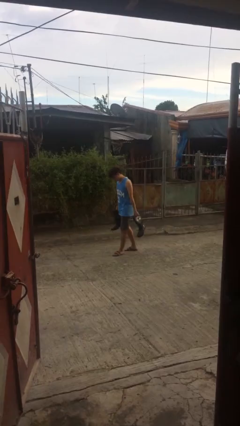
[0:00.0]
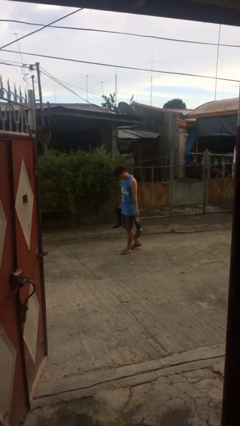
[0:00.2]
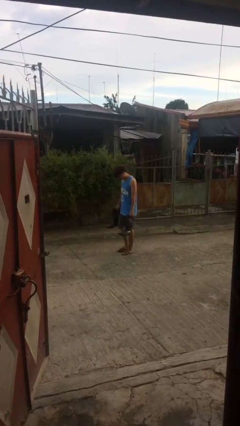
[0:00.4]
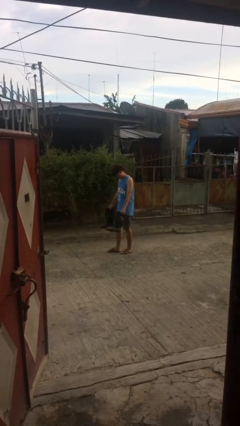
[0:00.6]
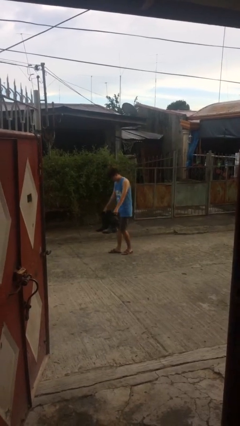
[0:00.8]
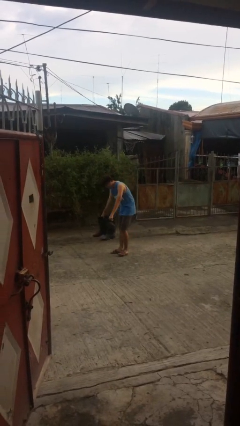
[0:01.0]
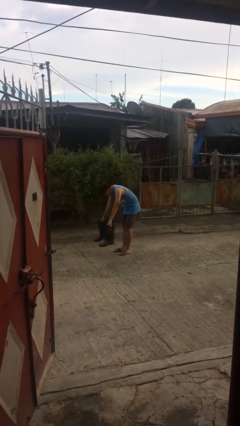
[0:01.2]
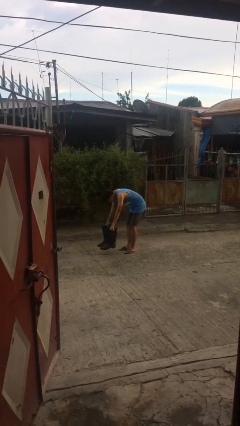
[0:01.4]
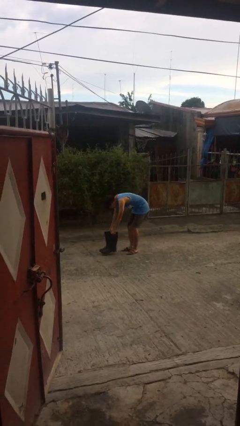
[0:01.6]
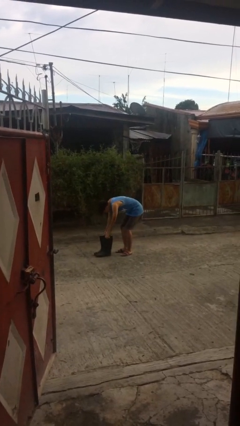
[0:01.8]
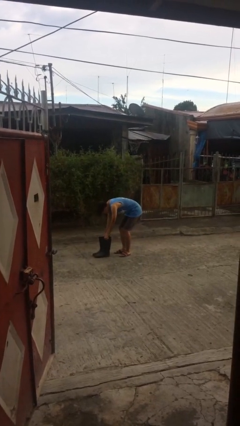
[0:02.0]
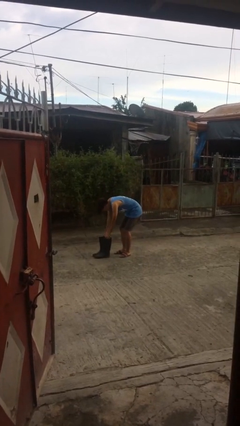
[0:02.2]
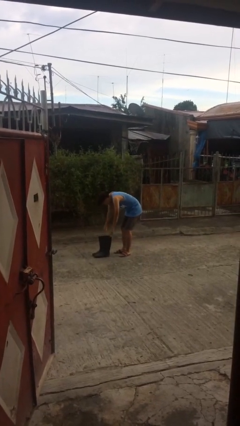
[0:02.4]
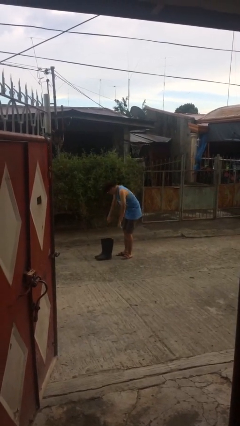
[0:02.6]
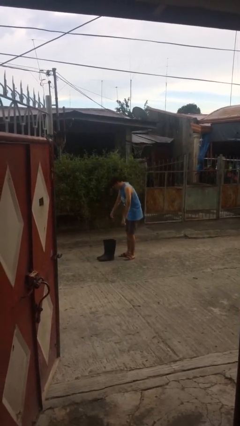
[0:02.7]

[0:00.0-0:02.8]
person puts down object on floor

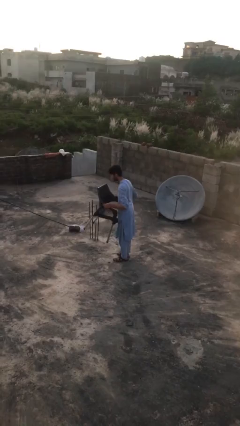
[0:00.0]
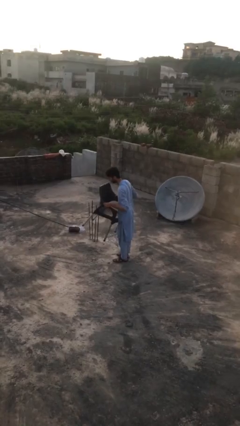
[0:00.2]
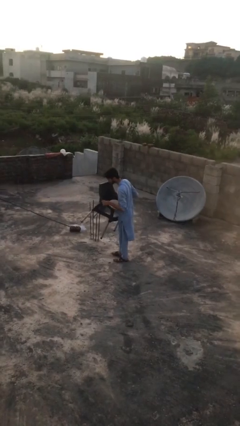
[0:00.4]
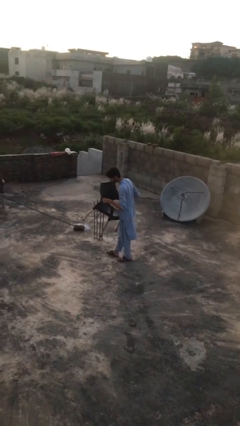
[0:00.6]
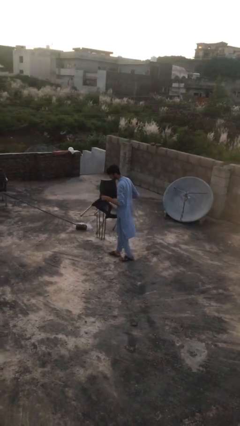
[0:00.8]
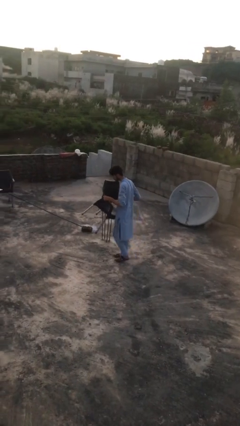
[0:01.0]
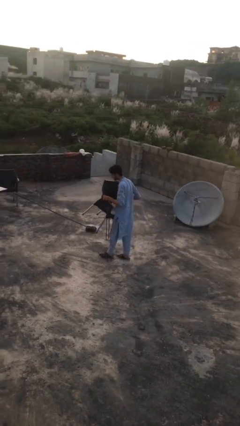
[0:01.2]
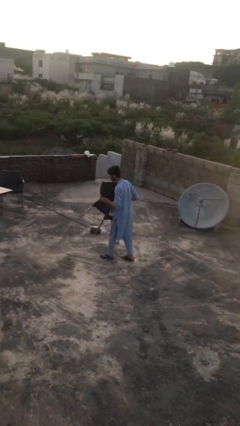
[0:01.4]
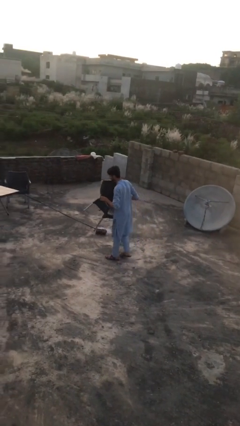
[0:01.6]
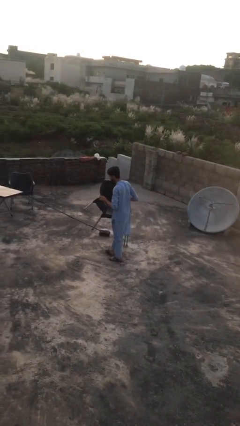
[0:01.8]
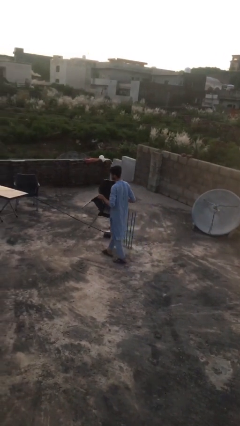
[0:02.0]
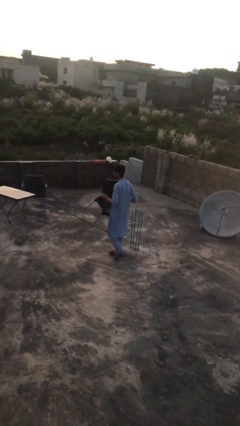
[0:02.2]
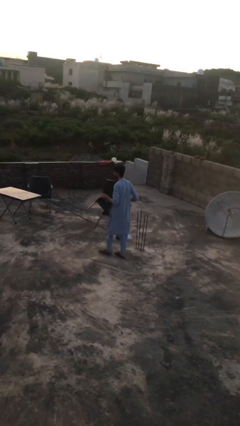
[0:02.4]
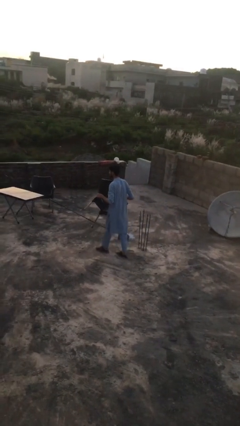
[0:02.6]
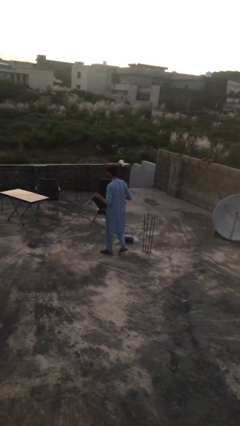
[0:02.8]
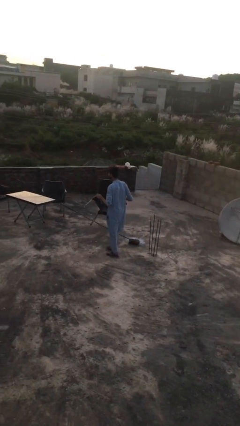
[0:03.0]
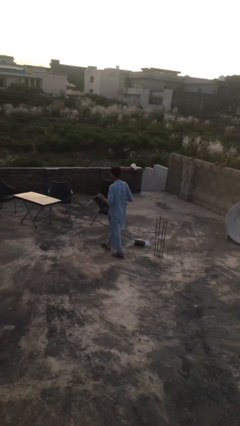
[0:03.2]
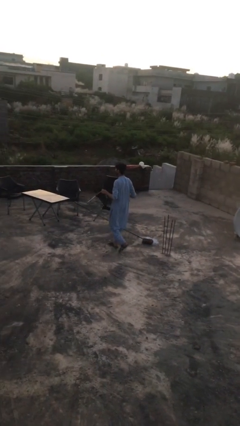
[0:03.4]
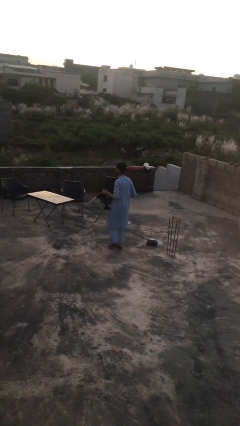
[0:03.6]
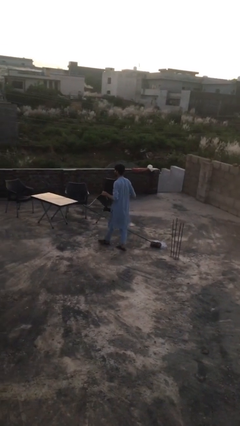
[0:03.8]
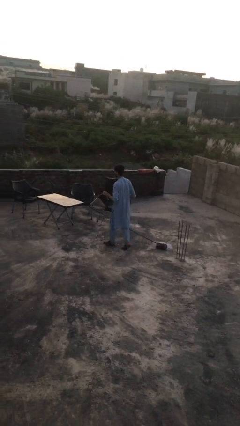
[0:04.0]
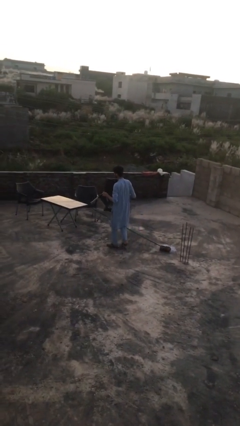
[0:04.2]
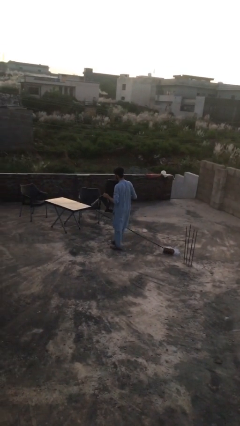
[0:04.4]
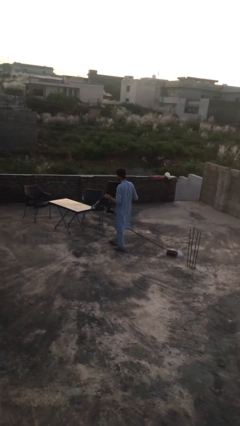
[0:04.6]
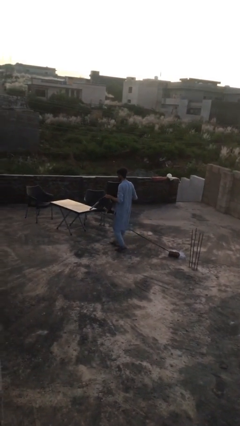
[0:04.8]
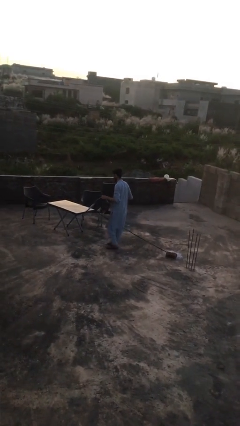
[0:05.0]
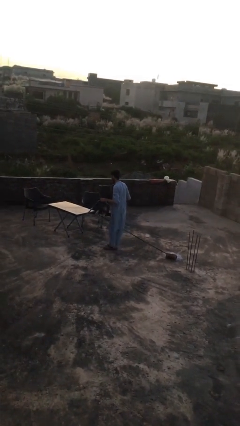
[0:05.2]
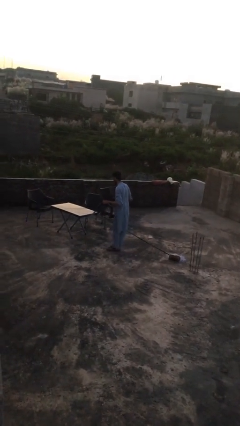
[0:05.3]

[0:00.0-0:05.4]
person carries heavy object

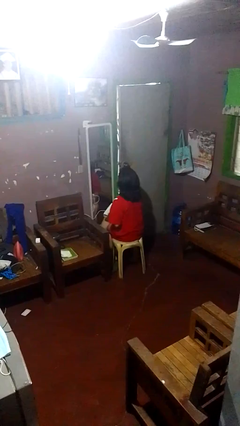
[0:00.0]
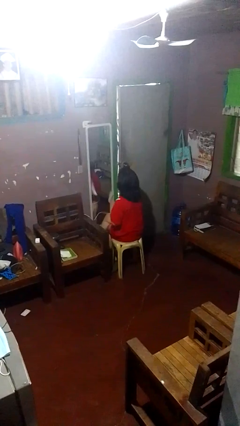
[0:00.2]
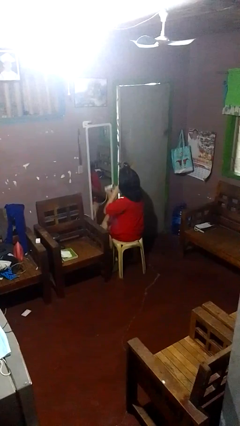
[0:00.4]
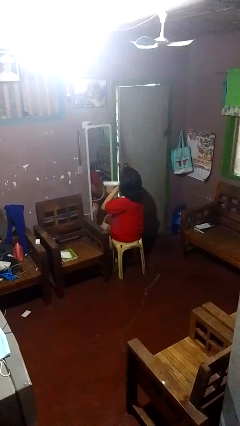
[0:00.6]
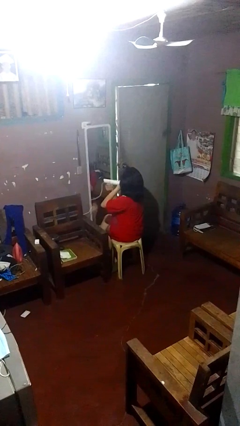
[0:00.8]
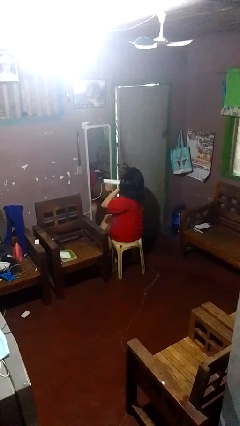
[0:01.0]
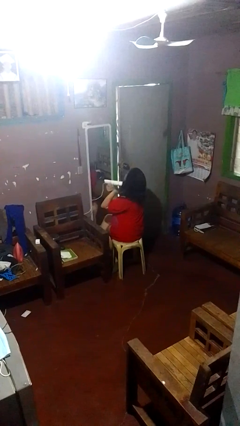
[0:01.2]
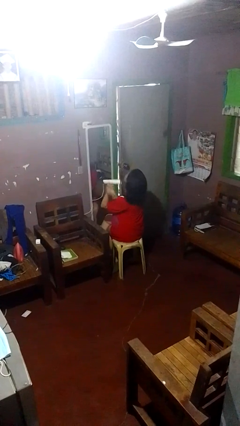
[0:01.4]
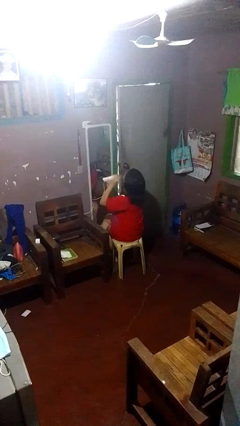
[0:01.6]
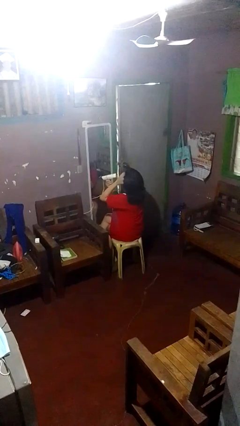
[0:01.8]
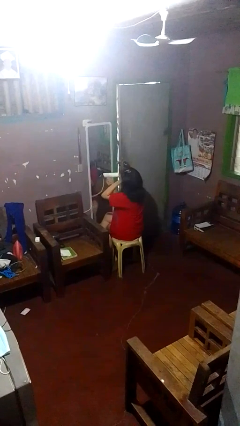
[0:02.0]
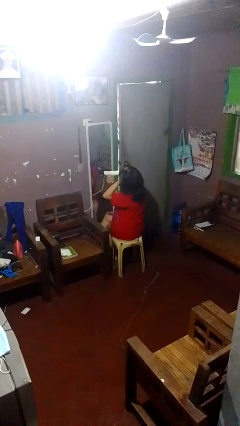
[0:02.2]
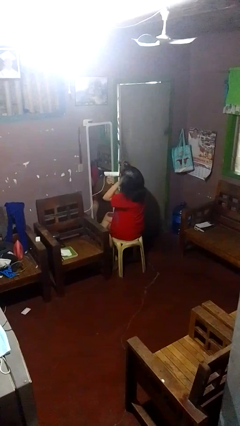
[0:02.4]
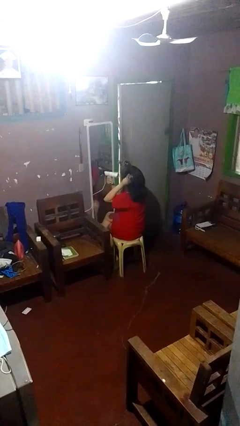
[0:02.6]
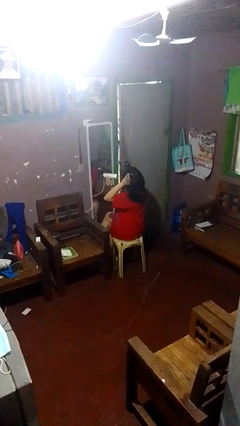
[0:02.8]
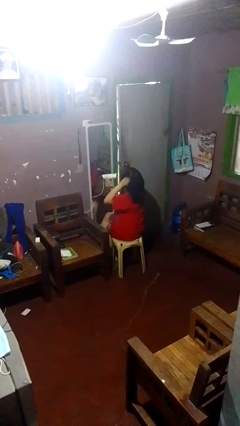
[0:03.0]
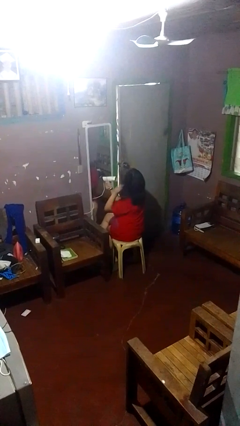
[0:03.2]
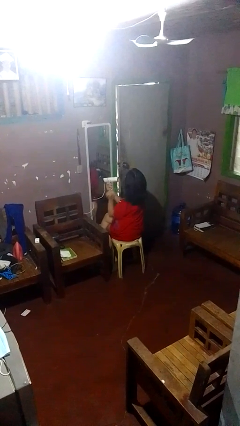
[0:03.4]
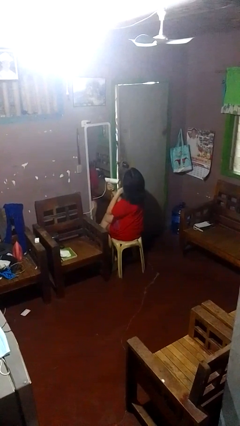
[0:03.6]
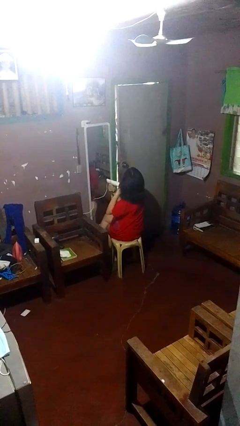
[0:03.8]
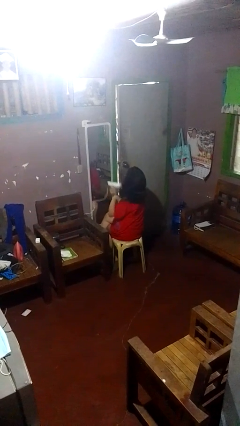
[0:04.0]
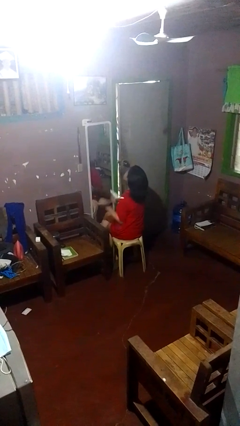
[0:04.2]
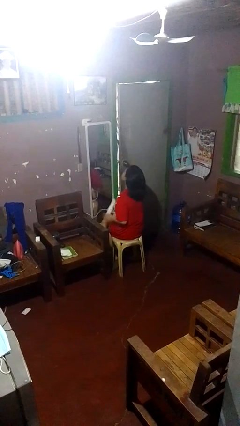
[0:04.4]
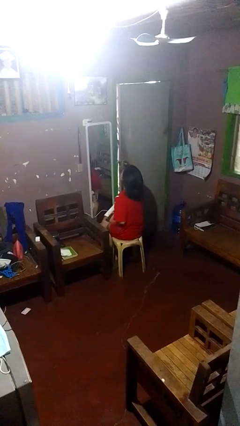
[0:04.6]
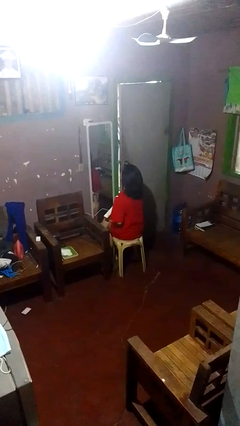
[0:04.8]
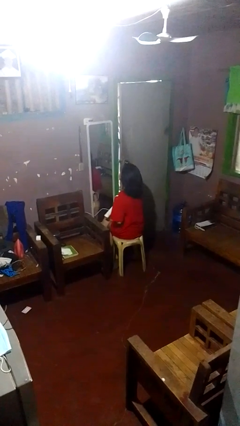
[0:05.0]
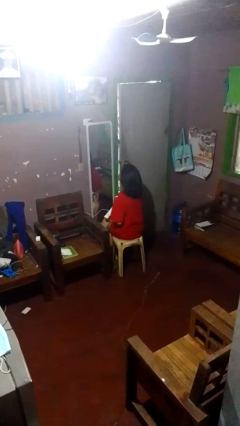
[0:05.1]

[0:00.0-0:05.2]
person dries hair with hairdryer

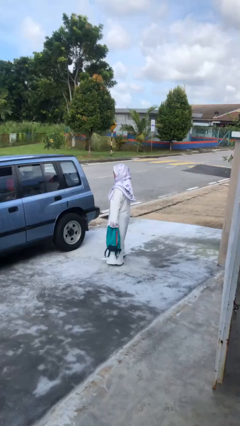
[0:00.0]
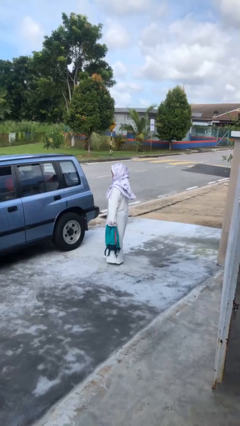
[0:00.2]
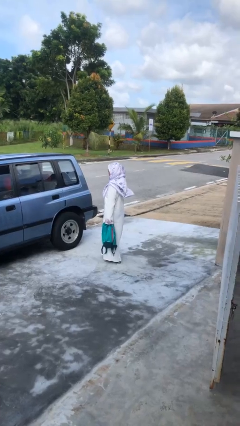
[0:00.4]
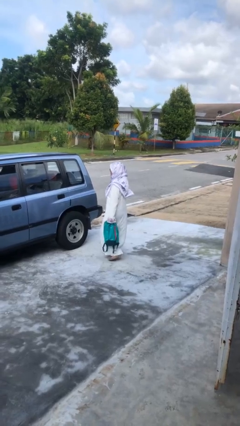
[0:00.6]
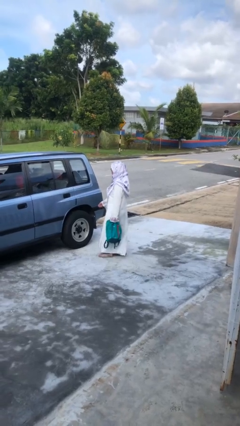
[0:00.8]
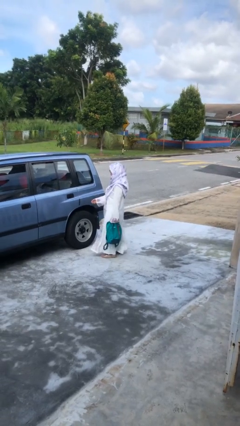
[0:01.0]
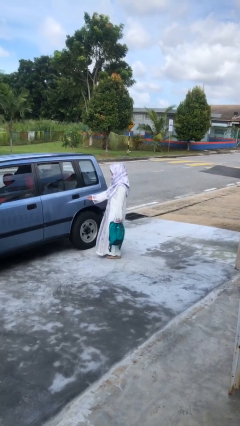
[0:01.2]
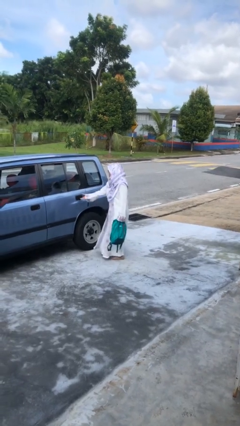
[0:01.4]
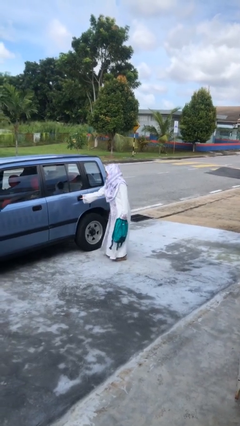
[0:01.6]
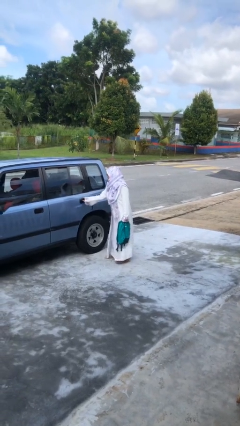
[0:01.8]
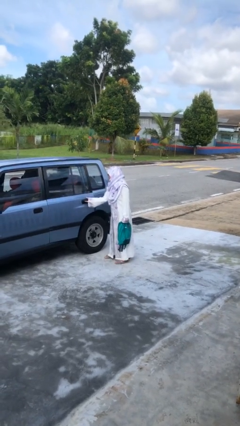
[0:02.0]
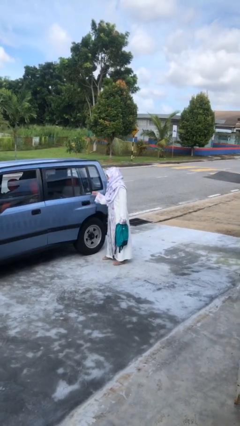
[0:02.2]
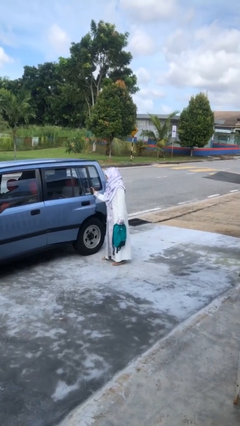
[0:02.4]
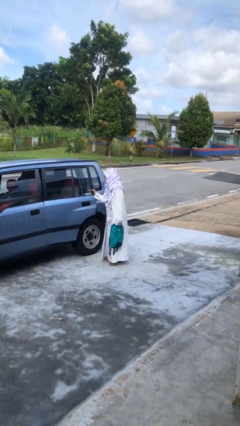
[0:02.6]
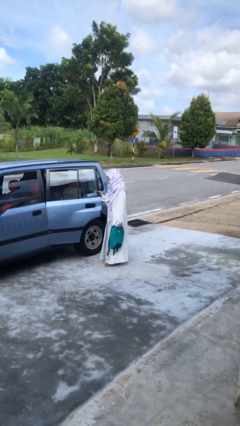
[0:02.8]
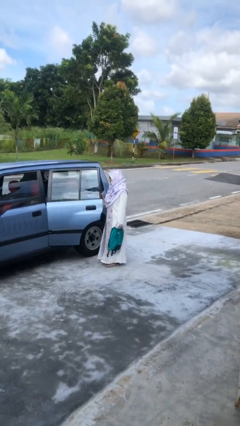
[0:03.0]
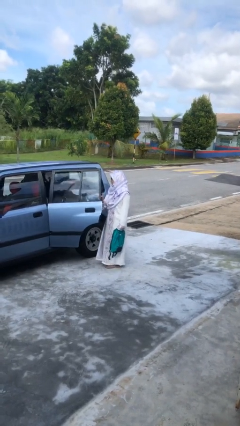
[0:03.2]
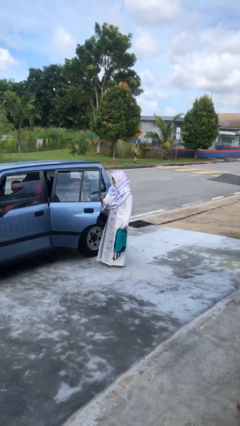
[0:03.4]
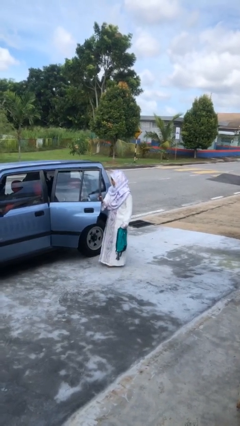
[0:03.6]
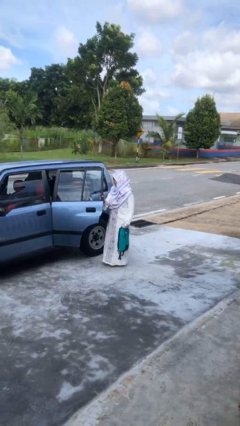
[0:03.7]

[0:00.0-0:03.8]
person opens car door

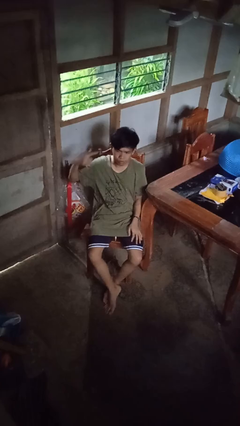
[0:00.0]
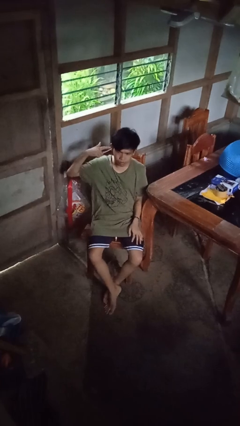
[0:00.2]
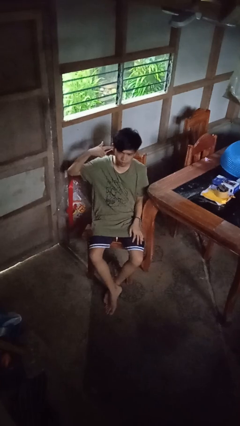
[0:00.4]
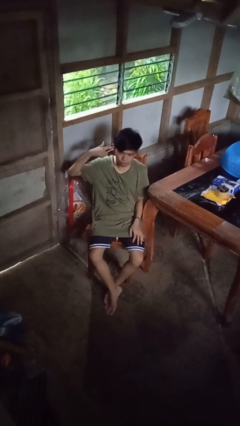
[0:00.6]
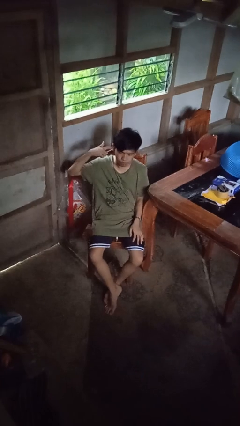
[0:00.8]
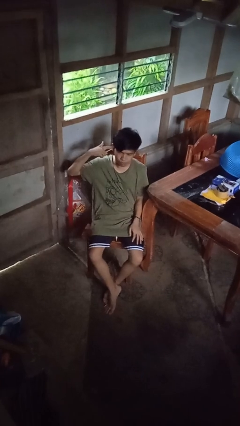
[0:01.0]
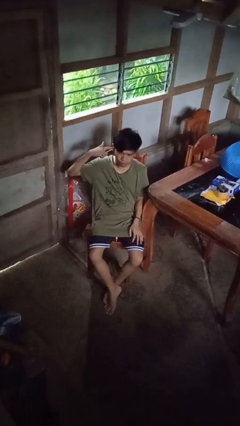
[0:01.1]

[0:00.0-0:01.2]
person gestures listen closely
